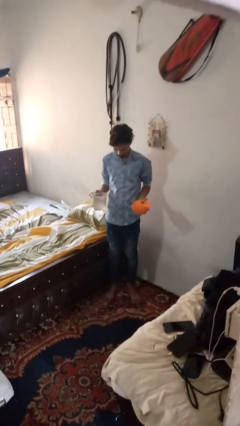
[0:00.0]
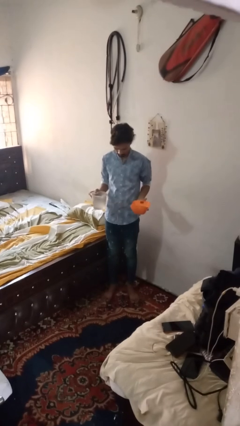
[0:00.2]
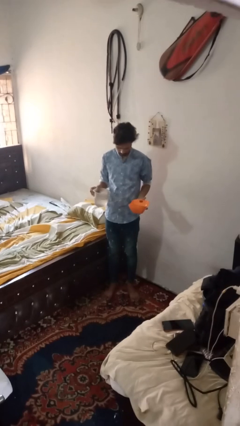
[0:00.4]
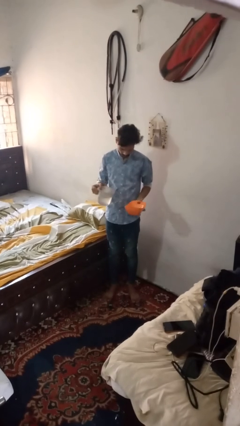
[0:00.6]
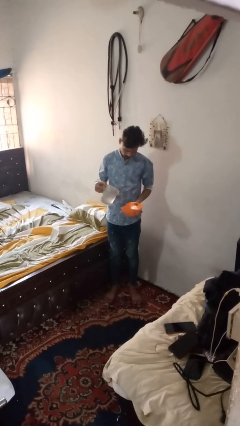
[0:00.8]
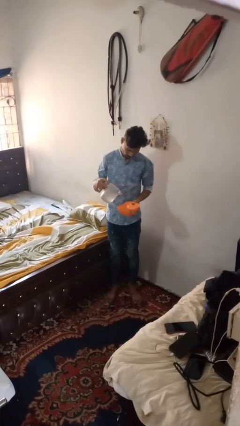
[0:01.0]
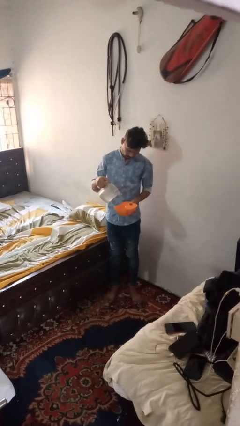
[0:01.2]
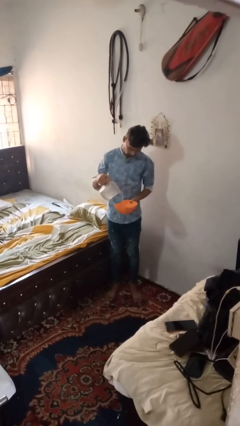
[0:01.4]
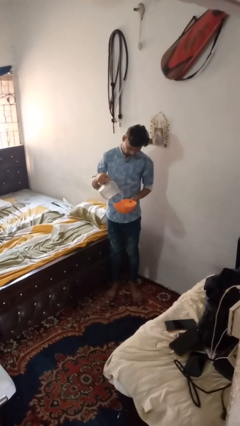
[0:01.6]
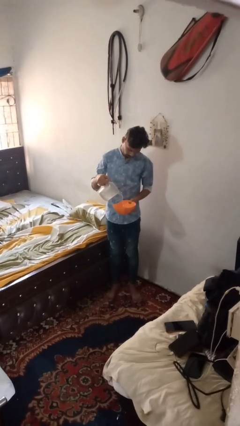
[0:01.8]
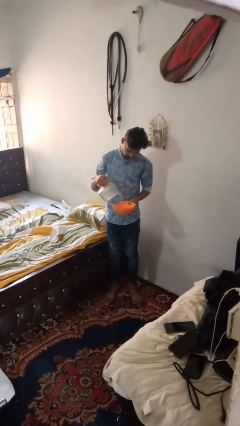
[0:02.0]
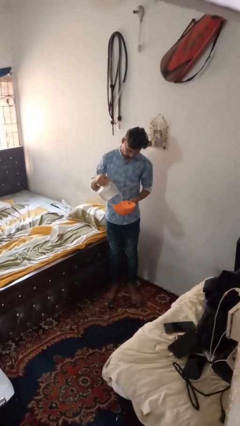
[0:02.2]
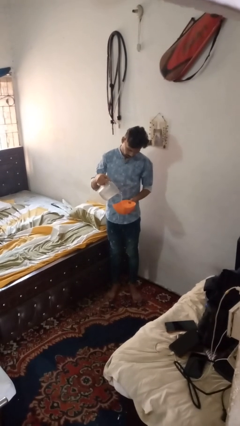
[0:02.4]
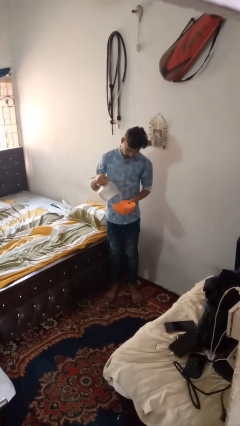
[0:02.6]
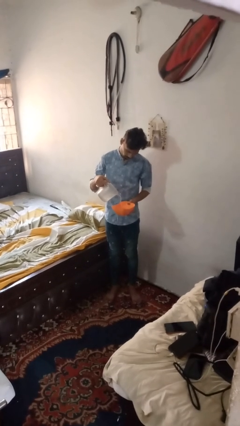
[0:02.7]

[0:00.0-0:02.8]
person pours into bowl

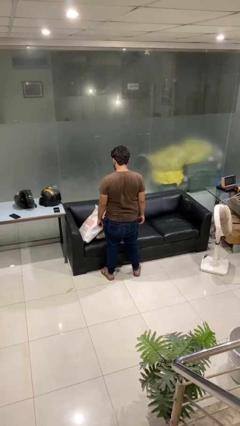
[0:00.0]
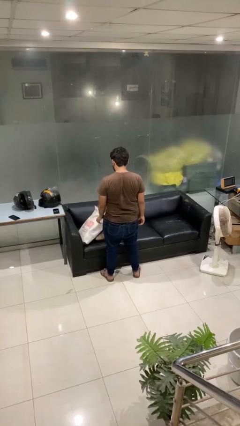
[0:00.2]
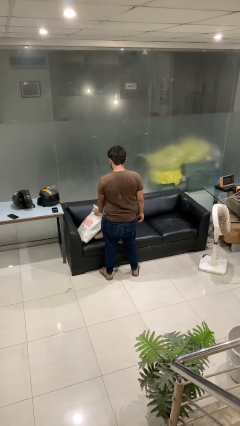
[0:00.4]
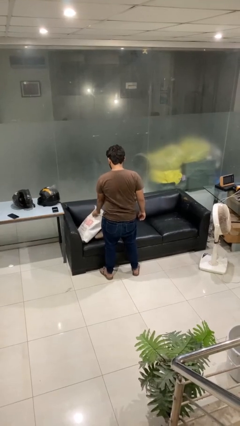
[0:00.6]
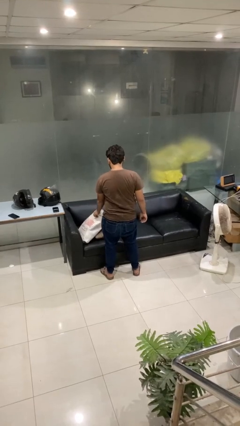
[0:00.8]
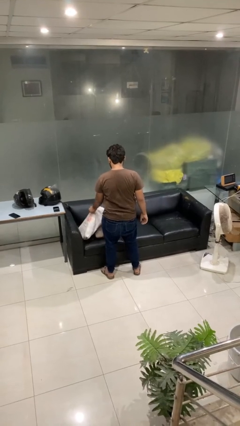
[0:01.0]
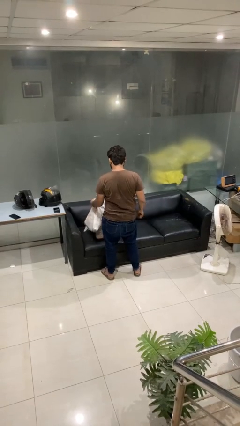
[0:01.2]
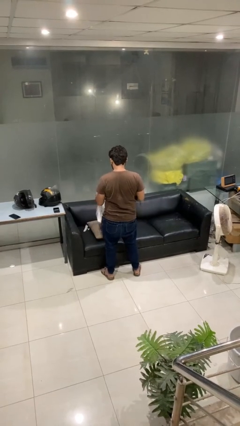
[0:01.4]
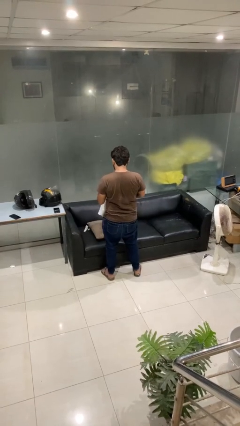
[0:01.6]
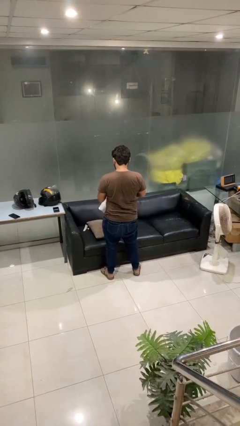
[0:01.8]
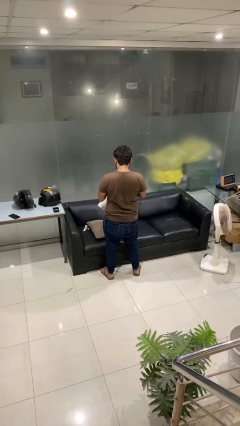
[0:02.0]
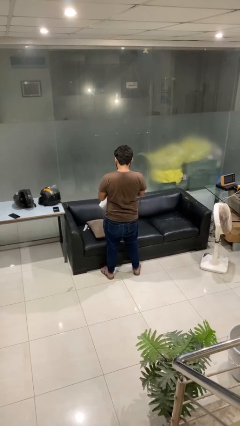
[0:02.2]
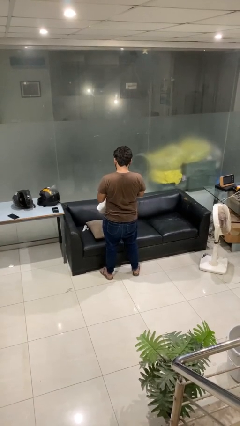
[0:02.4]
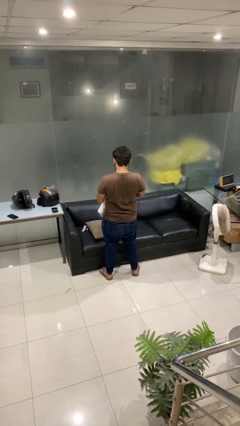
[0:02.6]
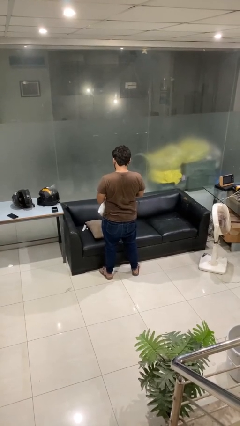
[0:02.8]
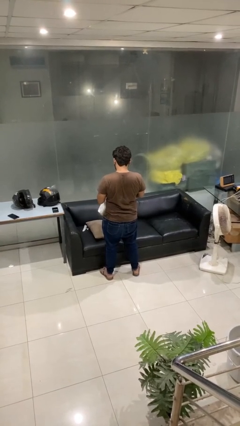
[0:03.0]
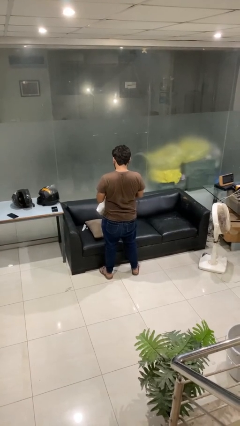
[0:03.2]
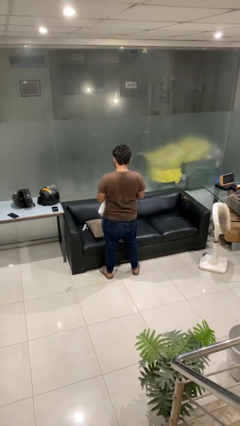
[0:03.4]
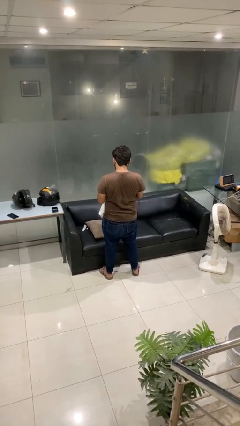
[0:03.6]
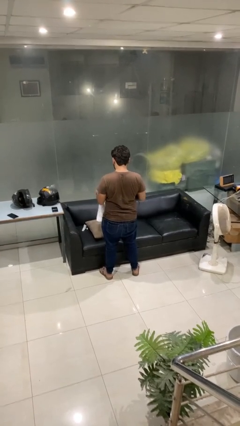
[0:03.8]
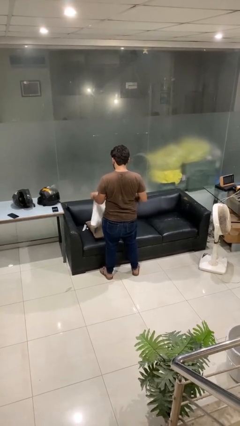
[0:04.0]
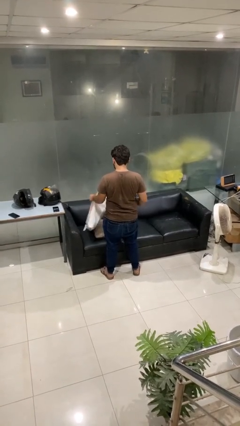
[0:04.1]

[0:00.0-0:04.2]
person searches in bag

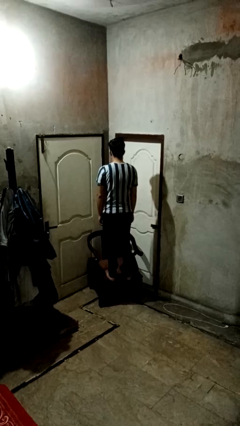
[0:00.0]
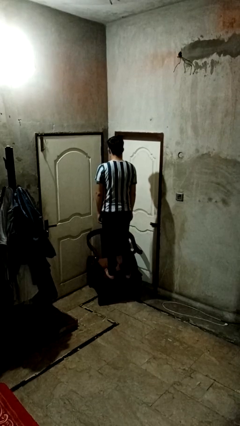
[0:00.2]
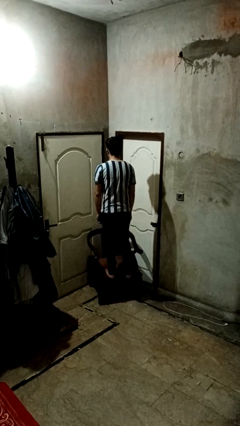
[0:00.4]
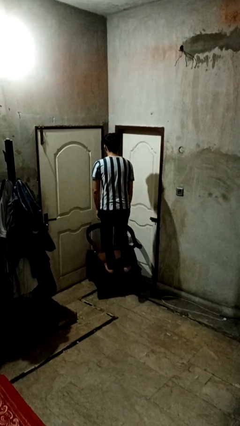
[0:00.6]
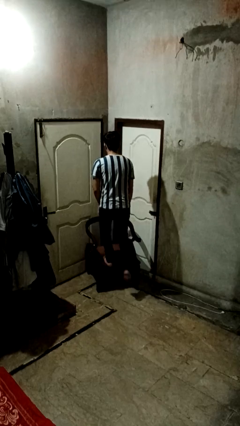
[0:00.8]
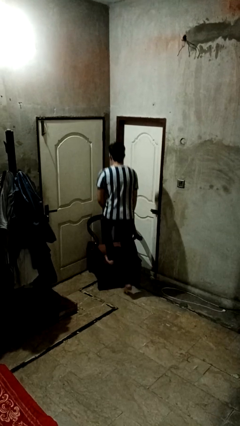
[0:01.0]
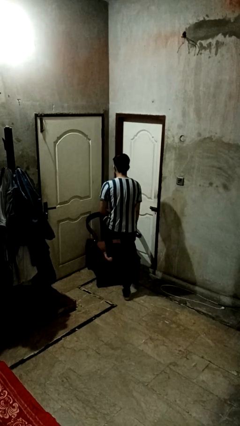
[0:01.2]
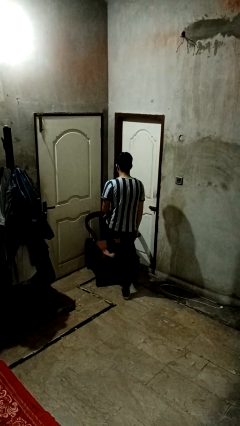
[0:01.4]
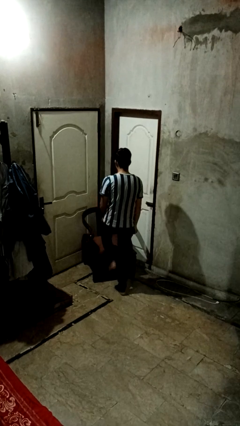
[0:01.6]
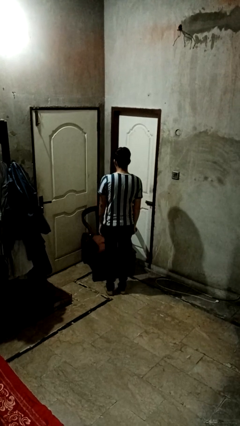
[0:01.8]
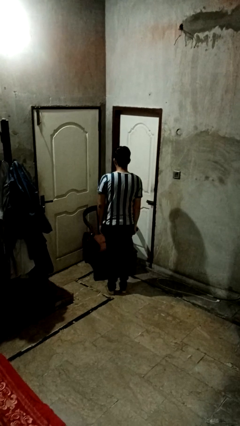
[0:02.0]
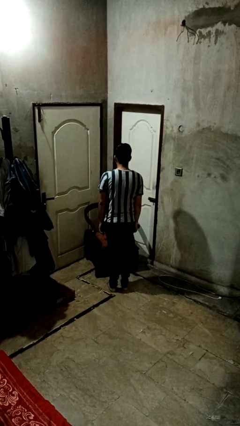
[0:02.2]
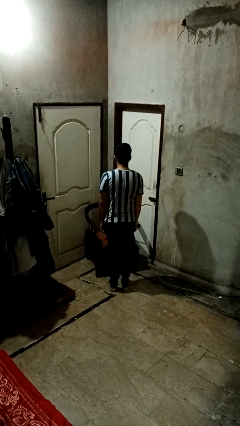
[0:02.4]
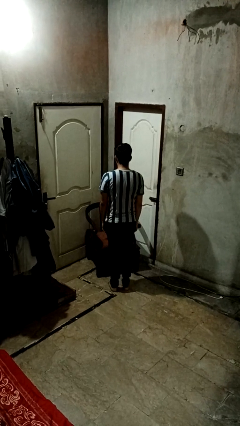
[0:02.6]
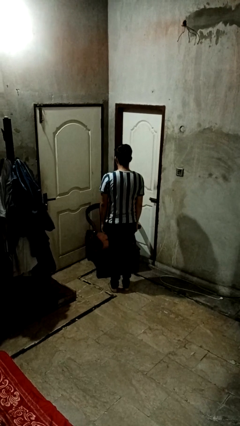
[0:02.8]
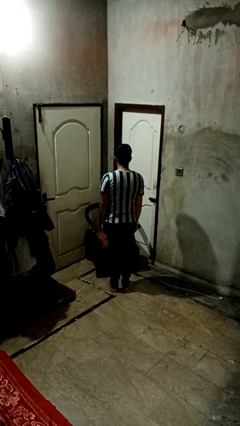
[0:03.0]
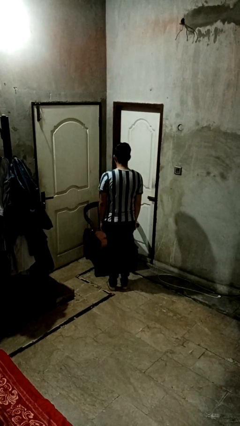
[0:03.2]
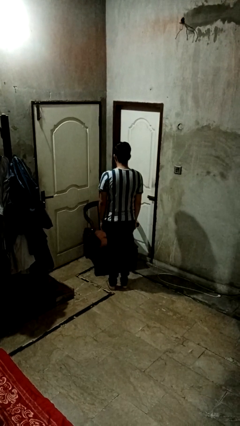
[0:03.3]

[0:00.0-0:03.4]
person climbs off couch

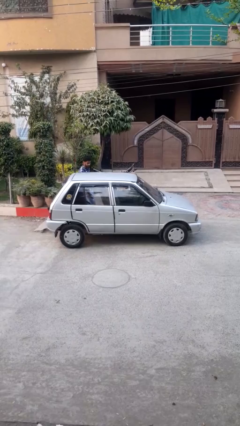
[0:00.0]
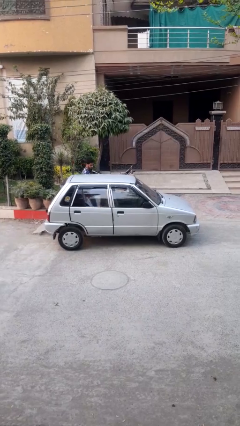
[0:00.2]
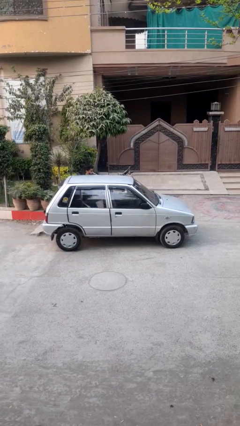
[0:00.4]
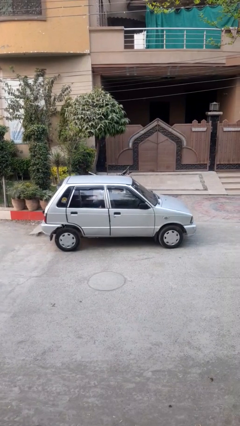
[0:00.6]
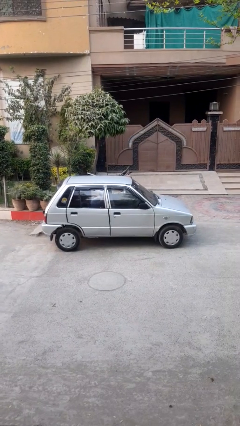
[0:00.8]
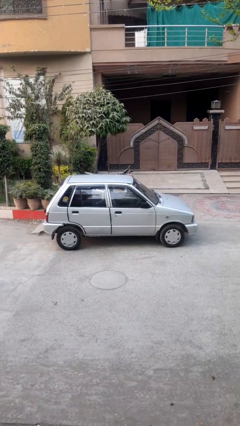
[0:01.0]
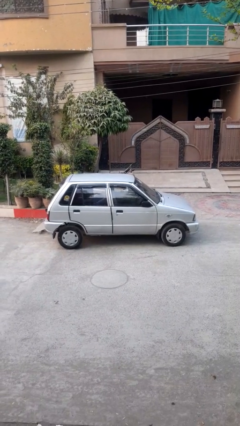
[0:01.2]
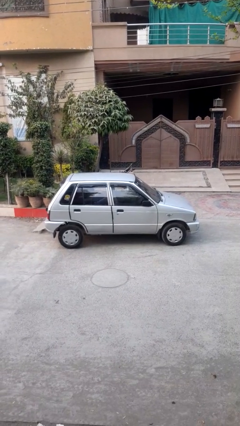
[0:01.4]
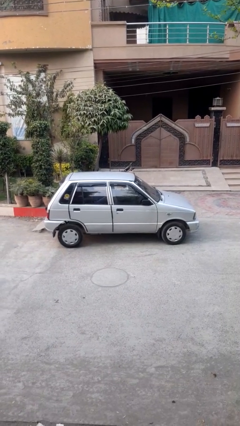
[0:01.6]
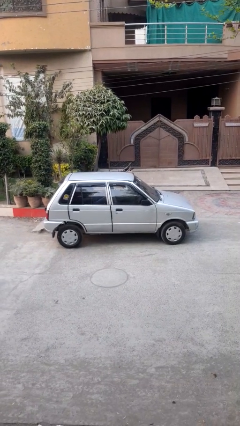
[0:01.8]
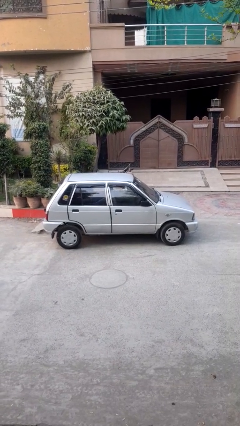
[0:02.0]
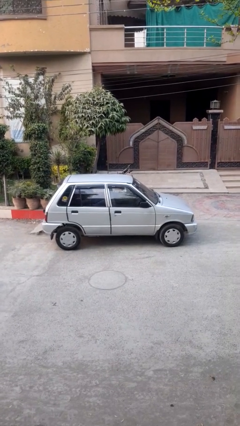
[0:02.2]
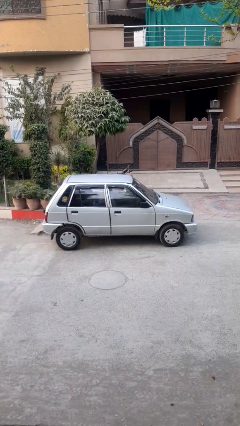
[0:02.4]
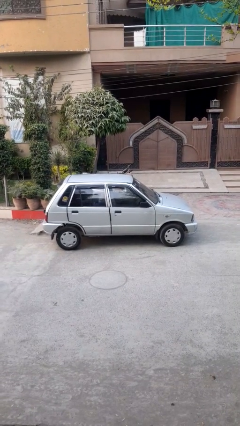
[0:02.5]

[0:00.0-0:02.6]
car picks up person

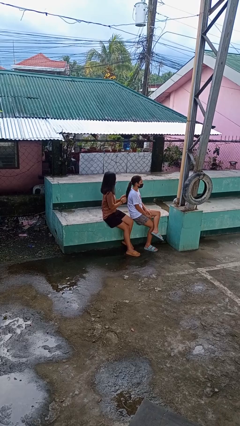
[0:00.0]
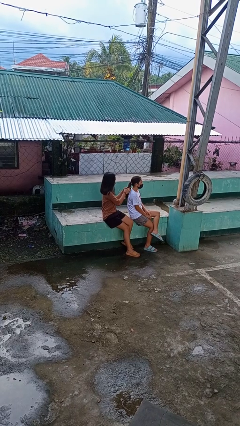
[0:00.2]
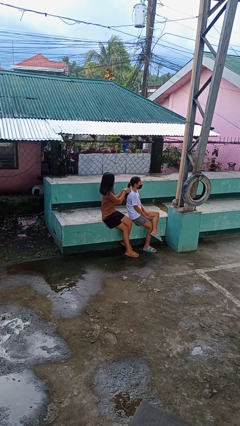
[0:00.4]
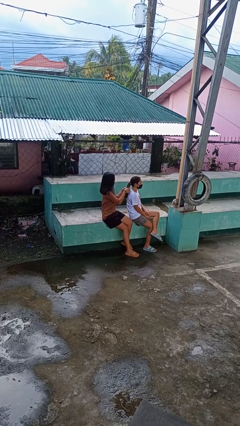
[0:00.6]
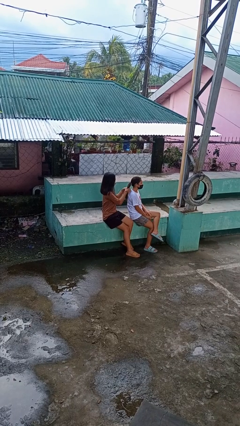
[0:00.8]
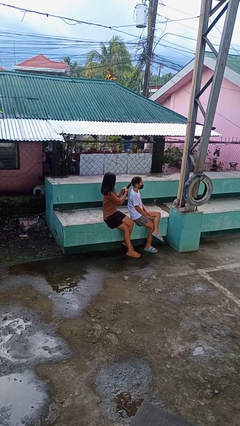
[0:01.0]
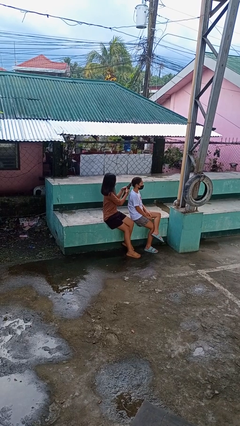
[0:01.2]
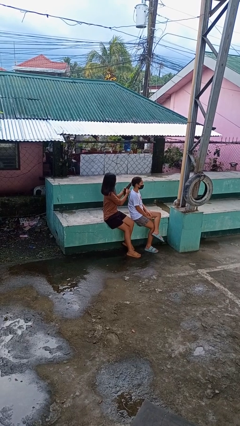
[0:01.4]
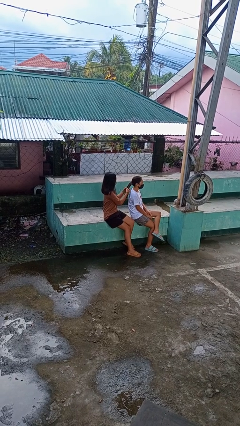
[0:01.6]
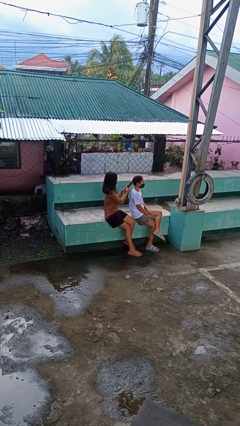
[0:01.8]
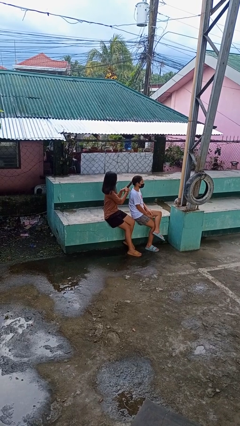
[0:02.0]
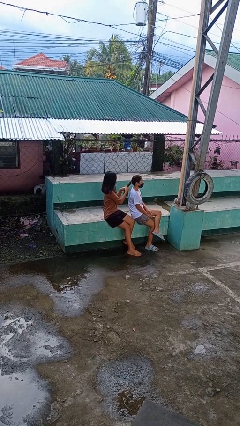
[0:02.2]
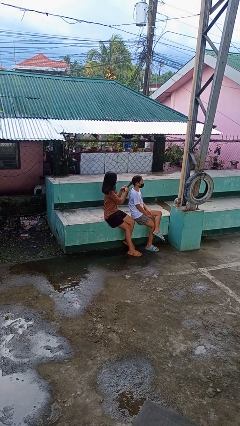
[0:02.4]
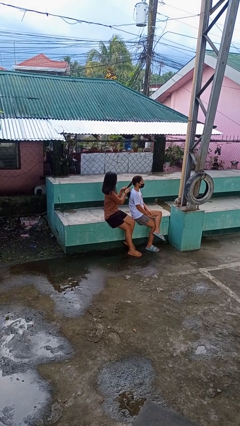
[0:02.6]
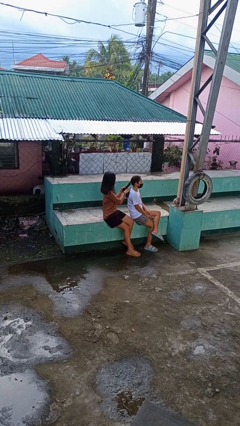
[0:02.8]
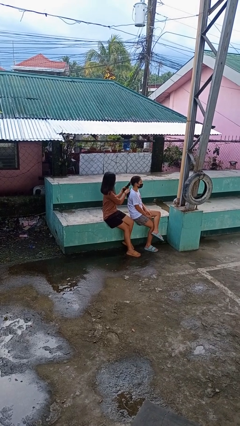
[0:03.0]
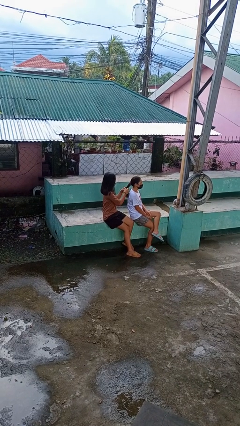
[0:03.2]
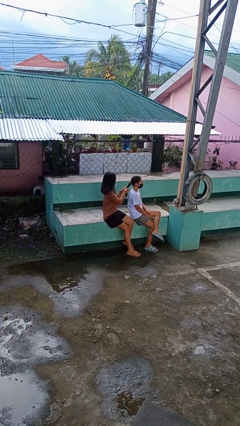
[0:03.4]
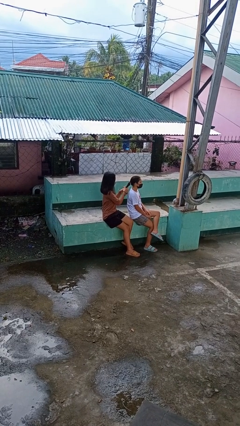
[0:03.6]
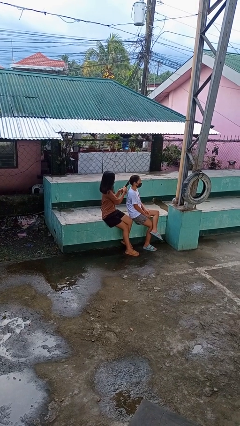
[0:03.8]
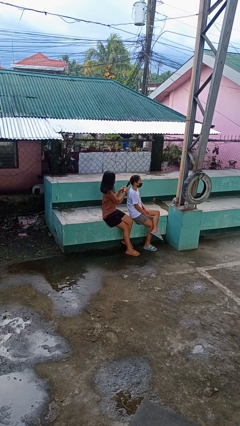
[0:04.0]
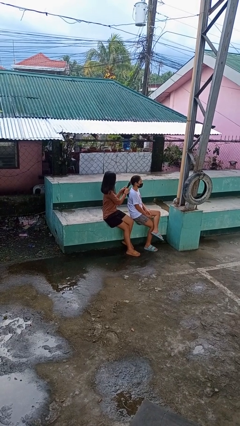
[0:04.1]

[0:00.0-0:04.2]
person braids hair of person

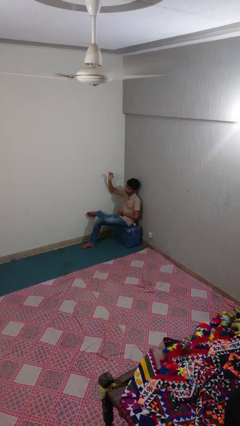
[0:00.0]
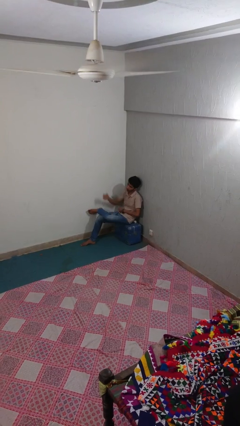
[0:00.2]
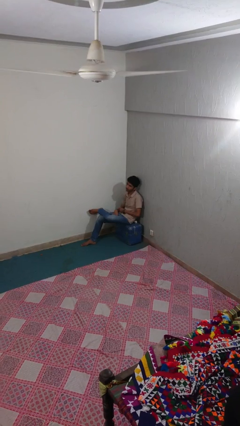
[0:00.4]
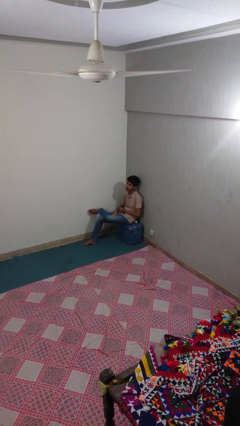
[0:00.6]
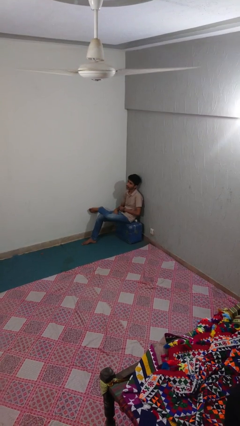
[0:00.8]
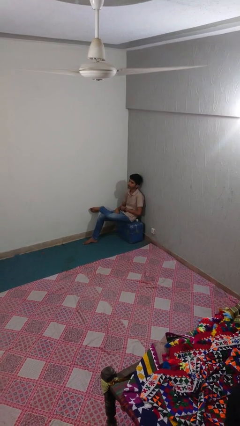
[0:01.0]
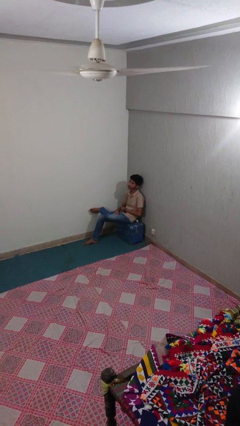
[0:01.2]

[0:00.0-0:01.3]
person gestures lower hand
